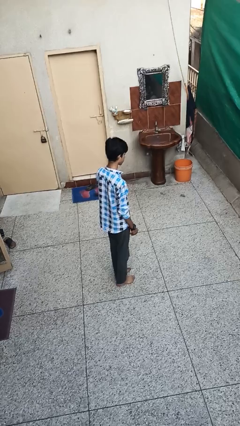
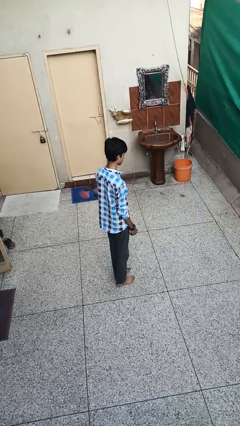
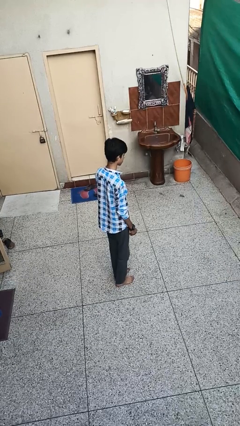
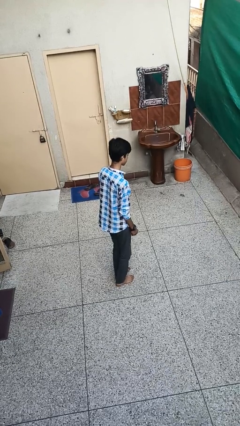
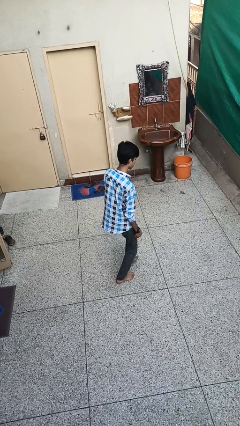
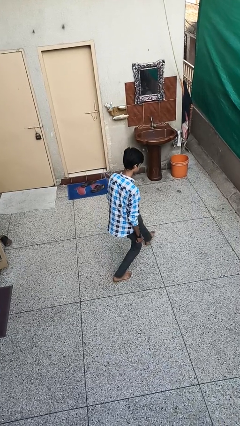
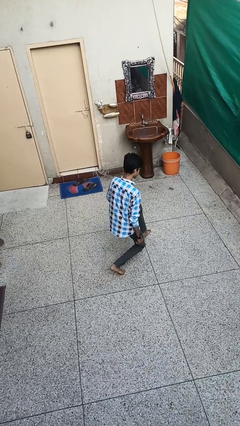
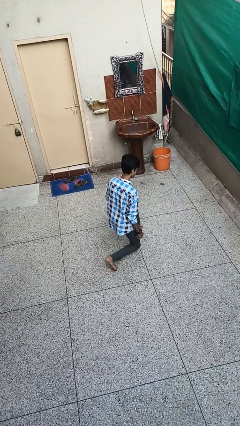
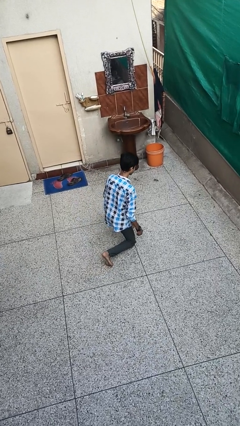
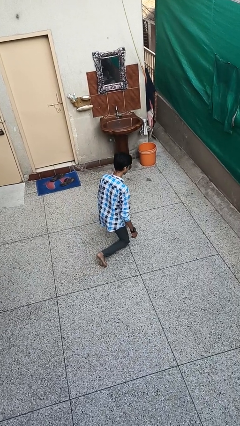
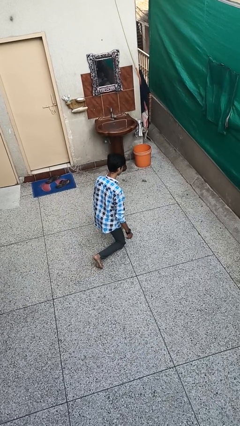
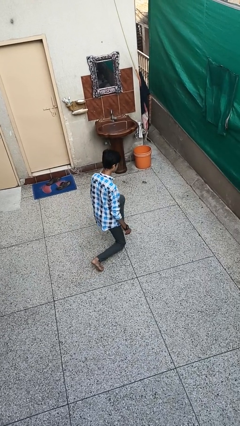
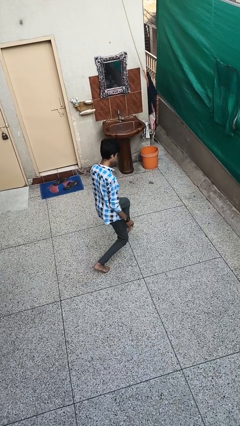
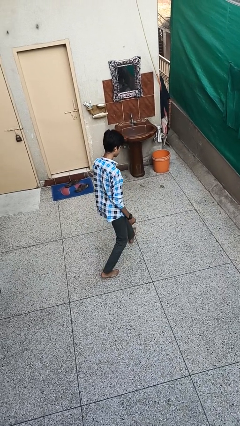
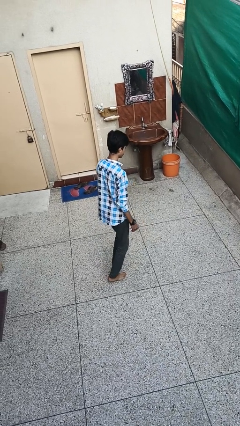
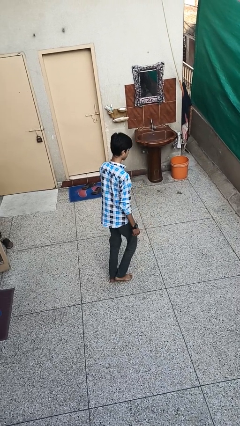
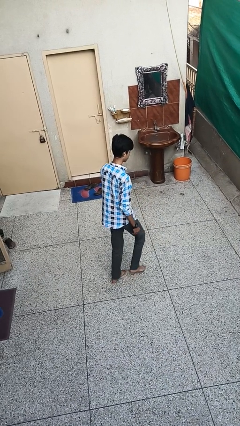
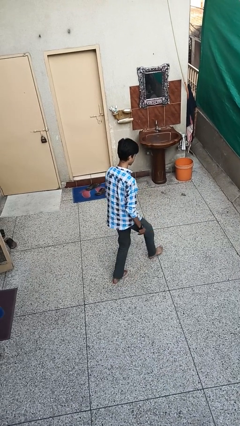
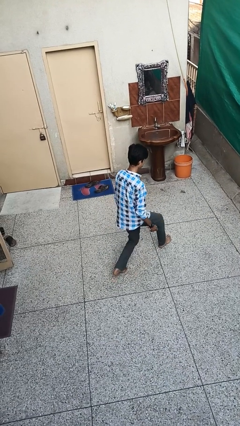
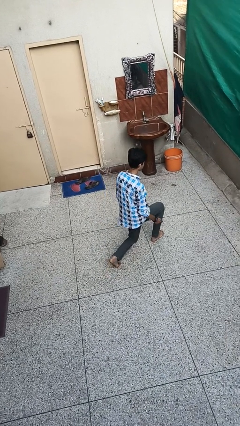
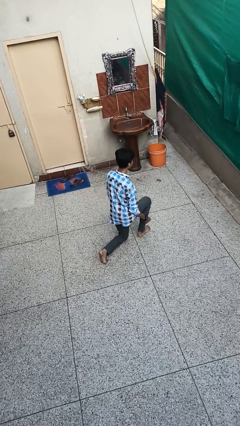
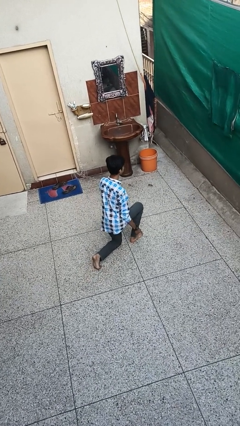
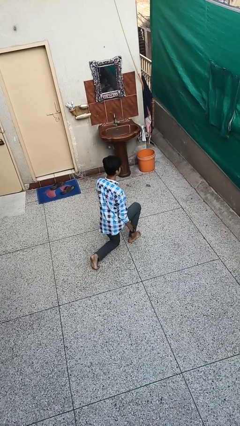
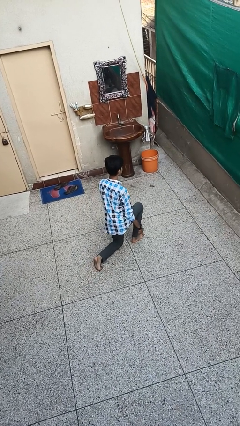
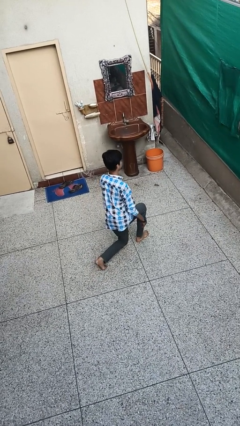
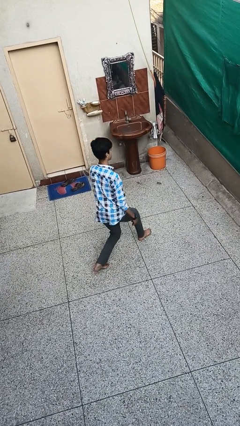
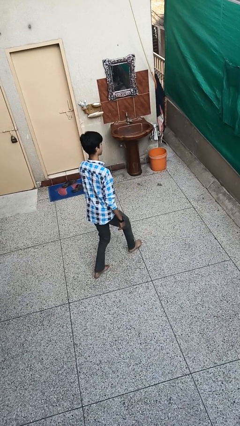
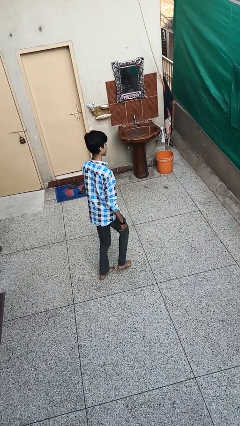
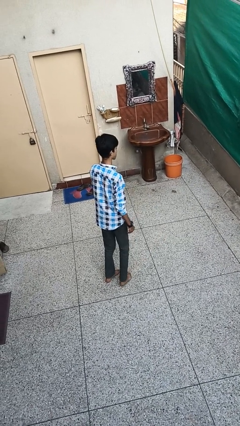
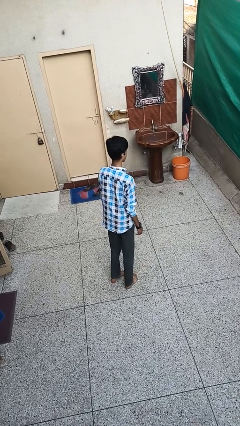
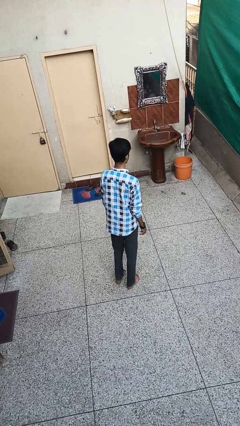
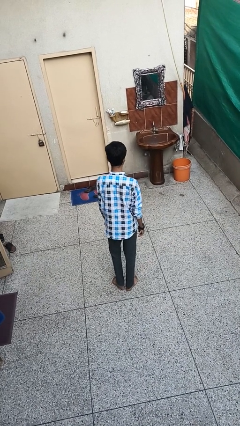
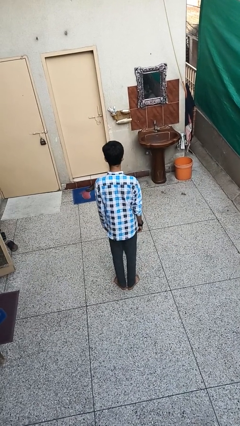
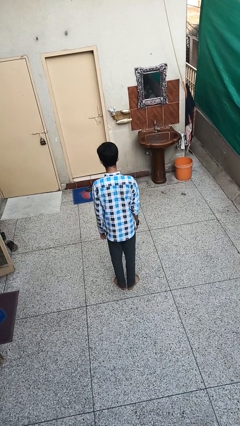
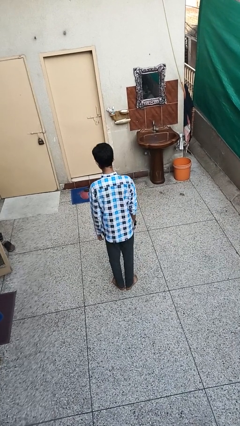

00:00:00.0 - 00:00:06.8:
person exercises with lunges

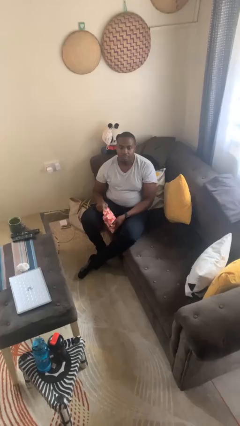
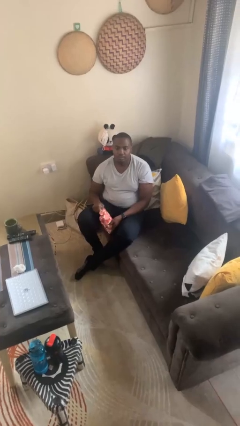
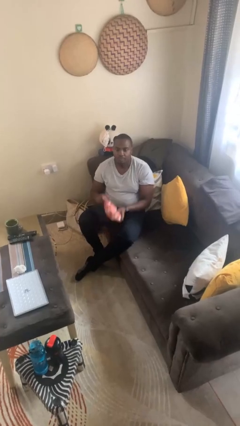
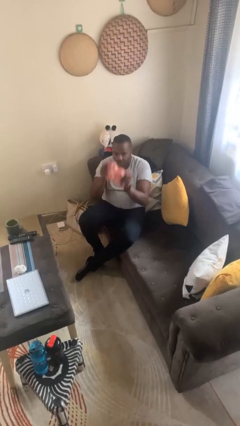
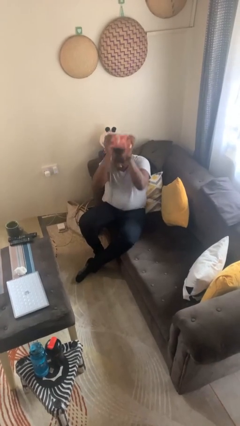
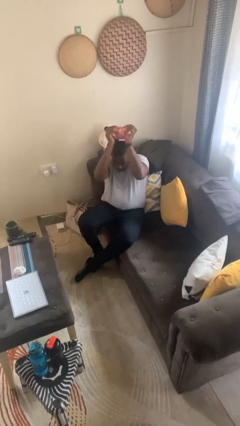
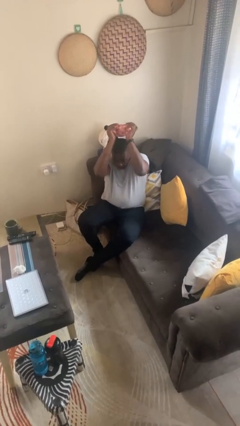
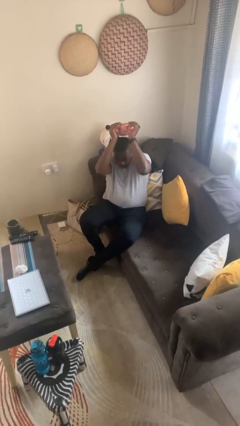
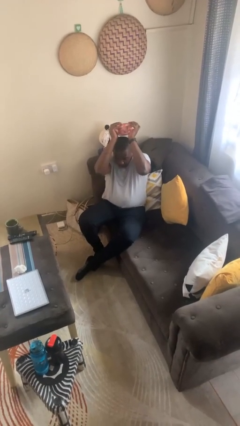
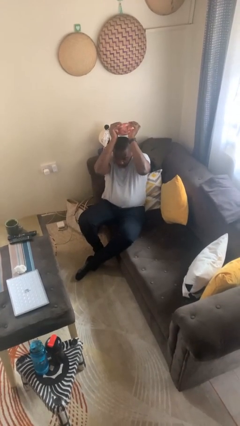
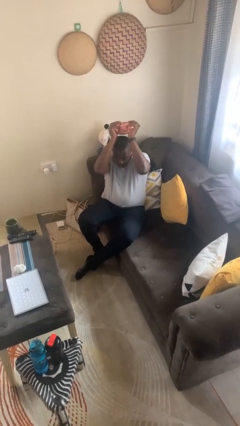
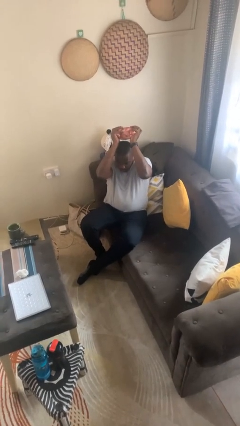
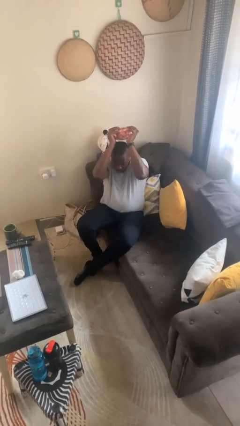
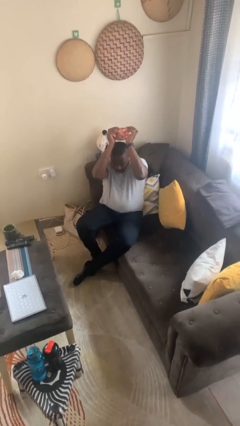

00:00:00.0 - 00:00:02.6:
person holds object above head

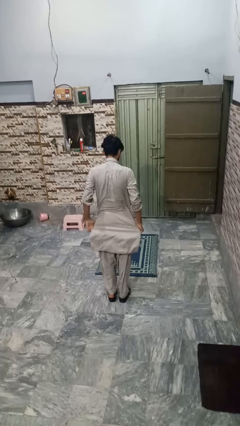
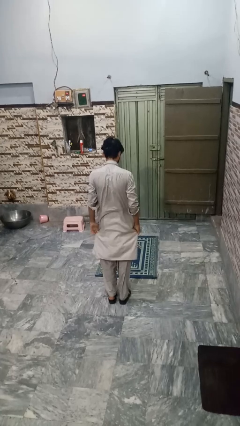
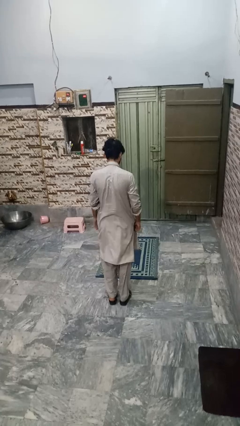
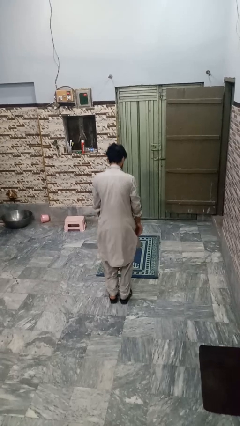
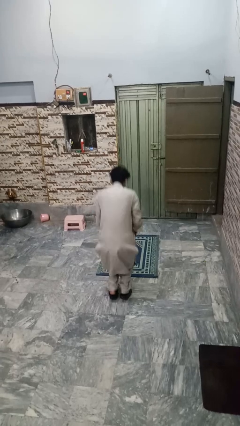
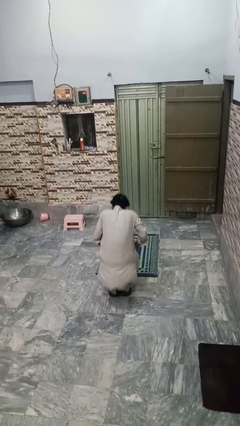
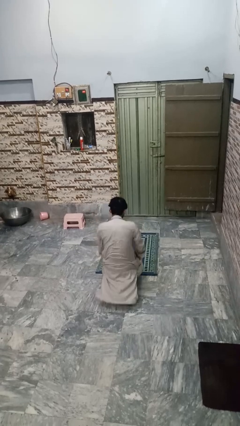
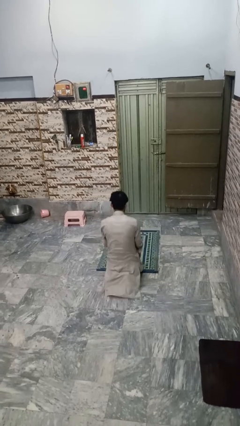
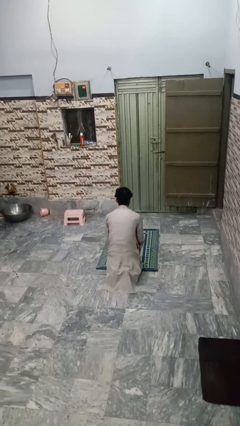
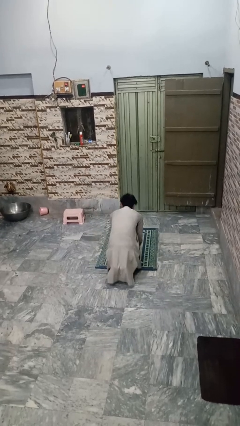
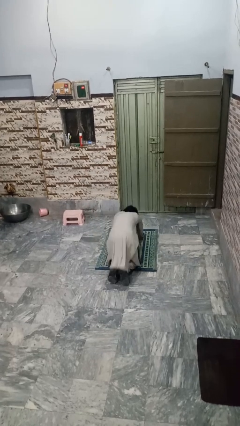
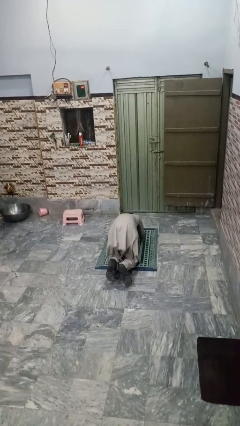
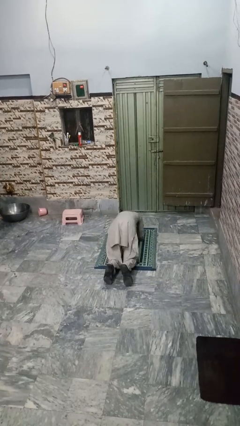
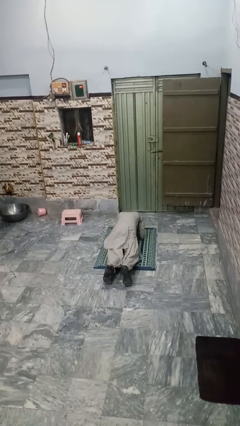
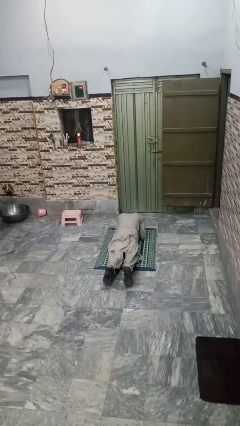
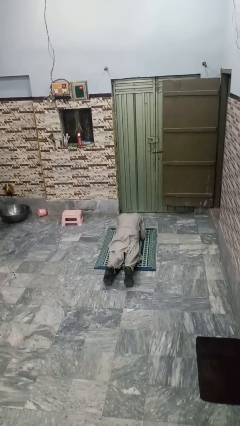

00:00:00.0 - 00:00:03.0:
person exercises with plank

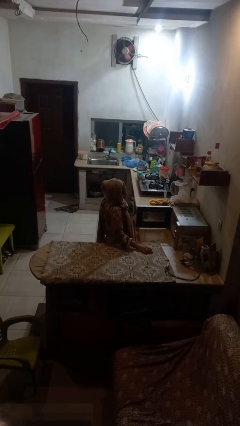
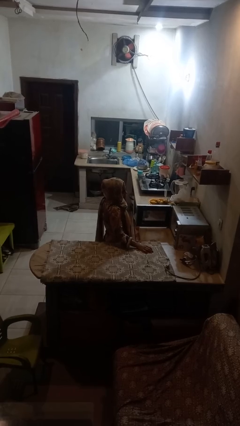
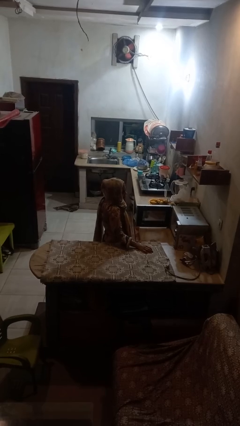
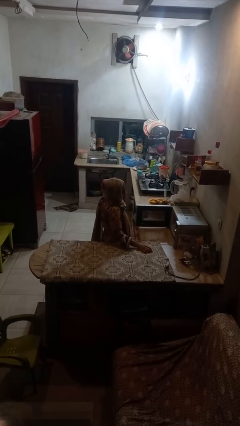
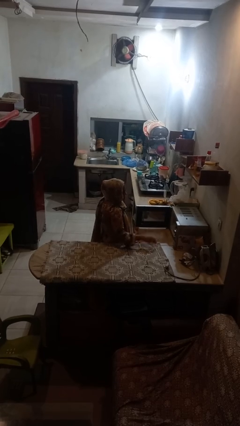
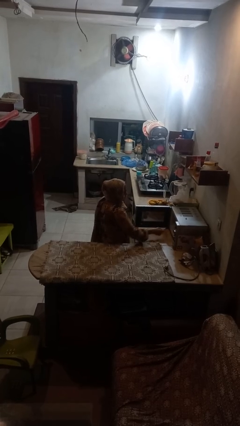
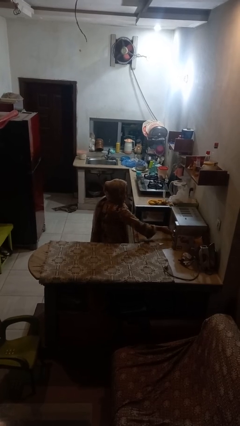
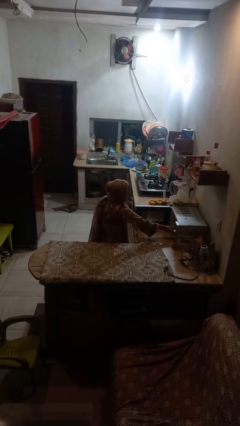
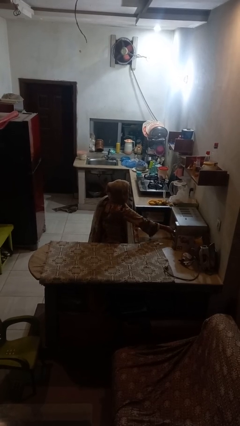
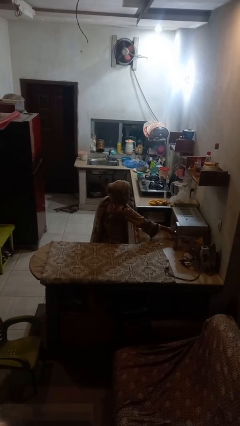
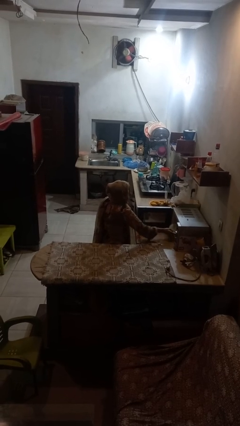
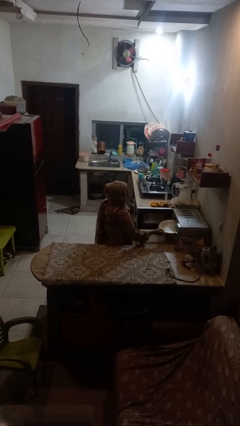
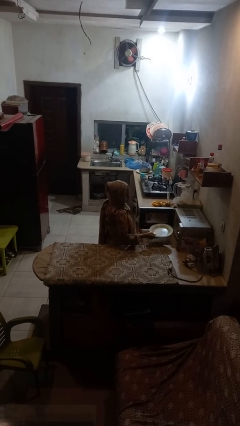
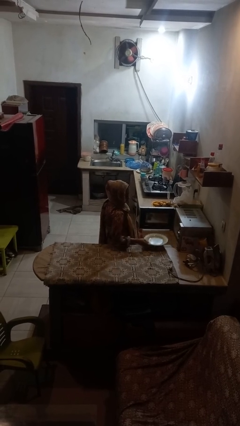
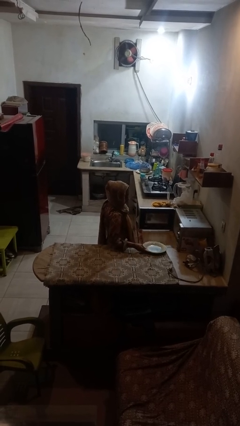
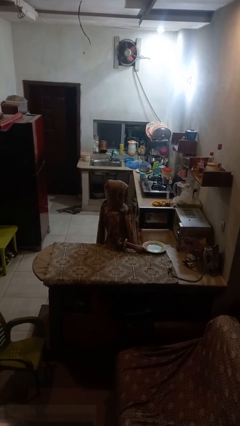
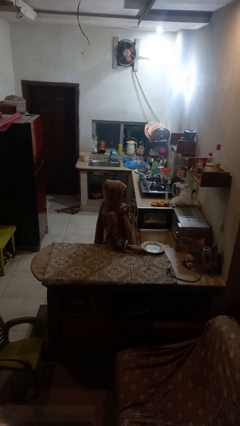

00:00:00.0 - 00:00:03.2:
person takes object from microwave

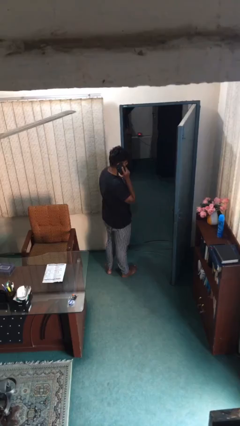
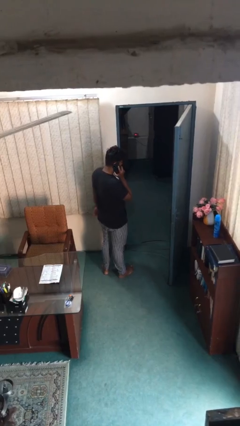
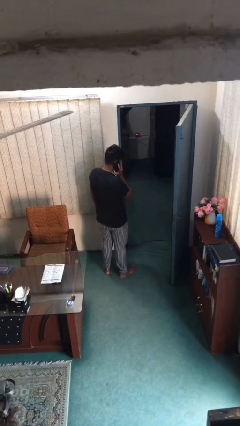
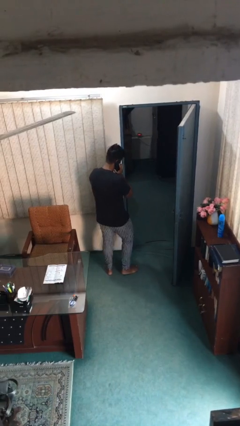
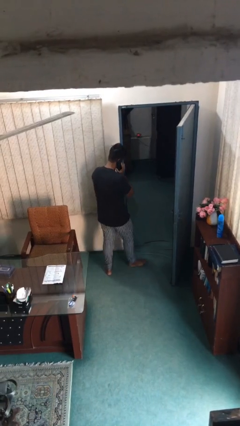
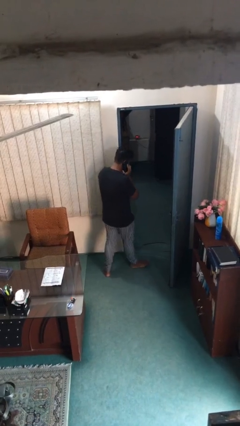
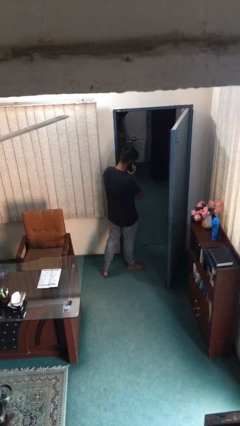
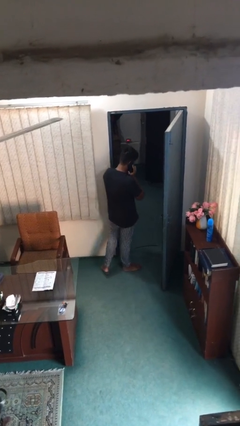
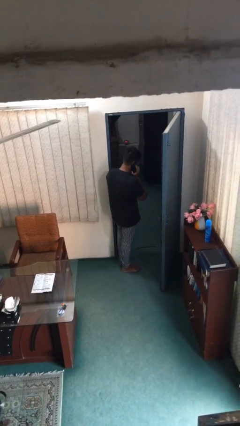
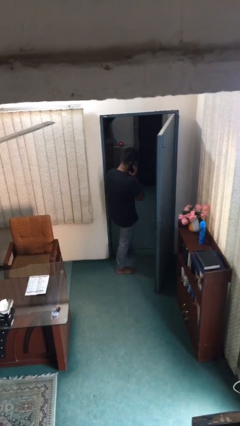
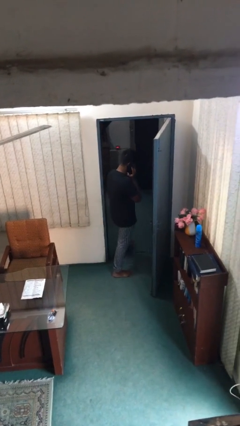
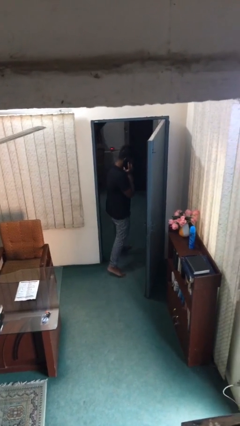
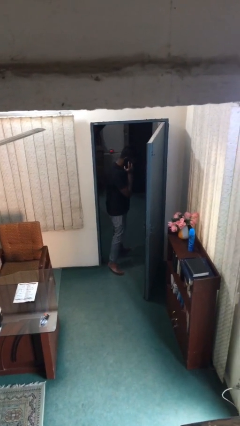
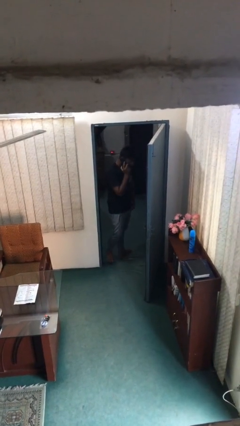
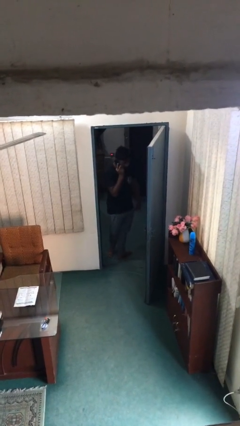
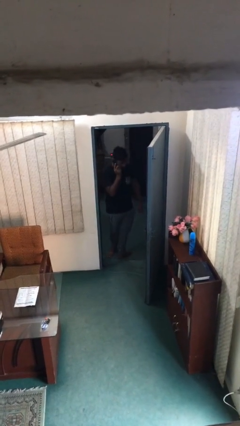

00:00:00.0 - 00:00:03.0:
person exits scene through structure
